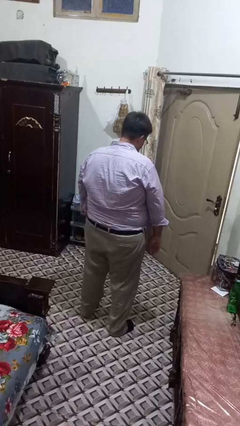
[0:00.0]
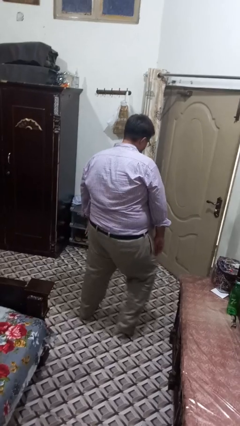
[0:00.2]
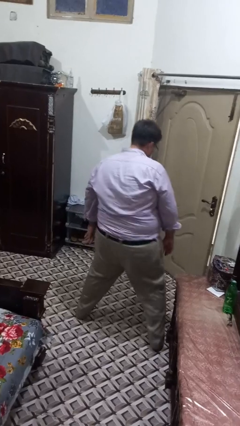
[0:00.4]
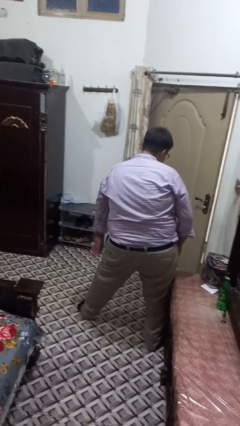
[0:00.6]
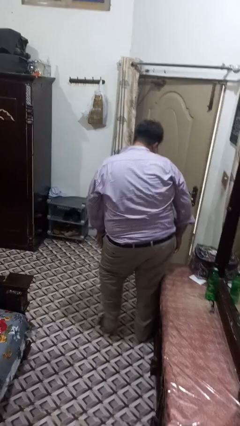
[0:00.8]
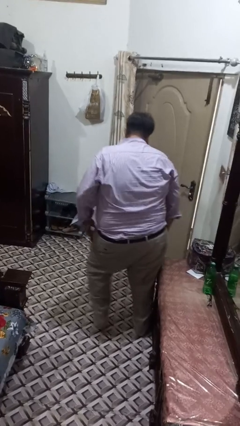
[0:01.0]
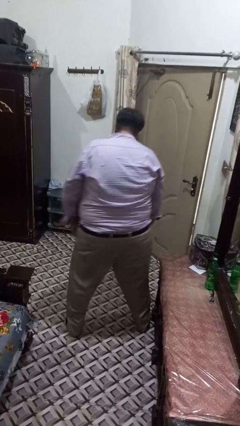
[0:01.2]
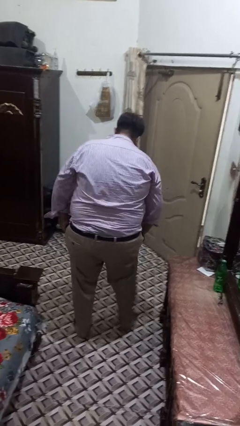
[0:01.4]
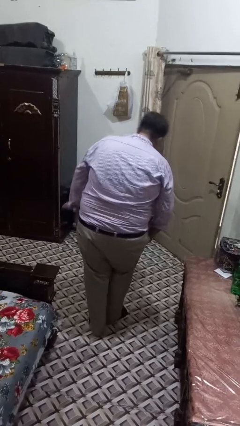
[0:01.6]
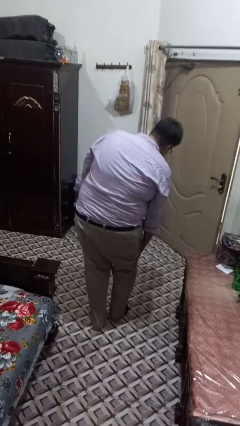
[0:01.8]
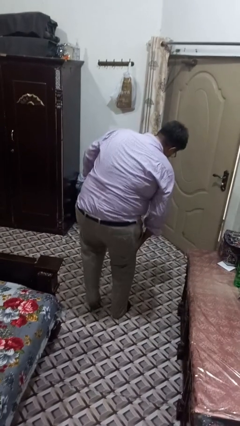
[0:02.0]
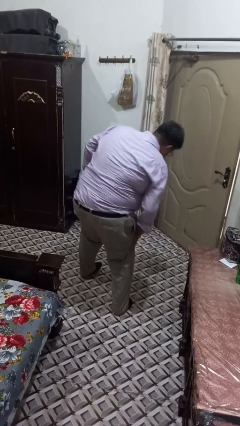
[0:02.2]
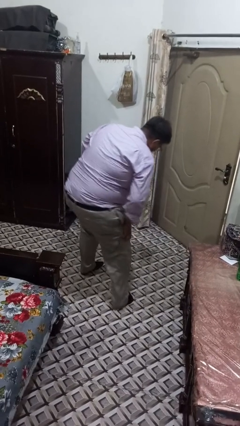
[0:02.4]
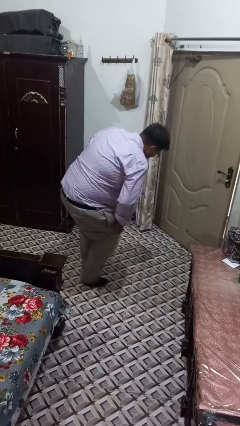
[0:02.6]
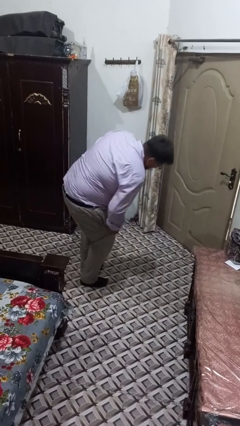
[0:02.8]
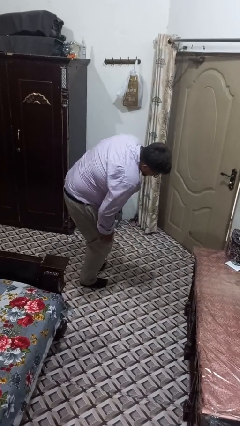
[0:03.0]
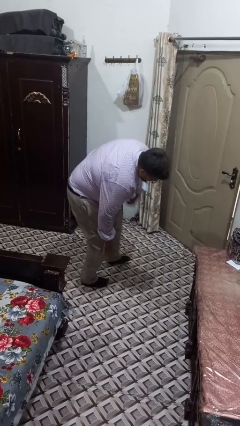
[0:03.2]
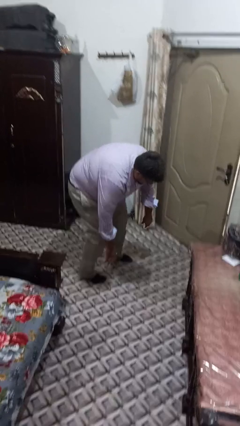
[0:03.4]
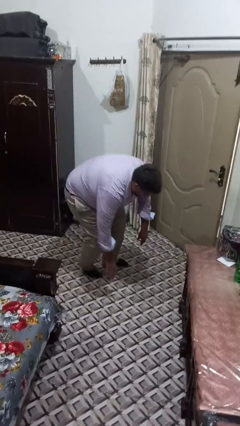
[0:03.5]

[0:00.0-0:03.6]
person trips on object on floor

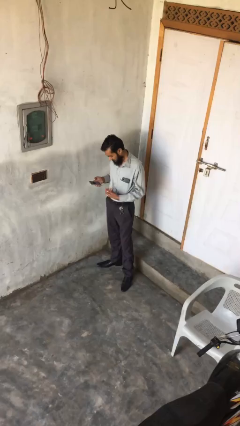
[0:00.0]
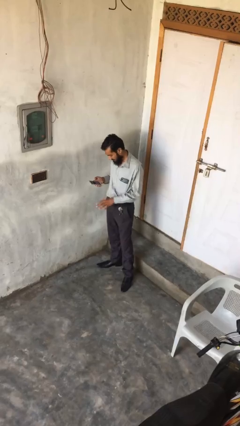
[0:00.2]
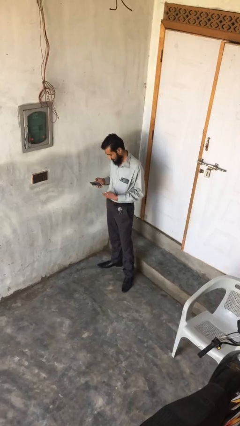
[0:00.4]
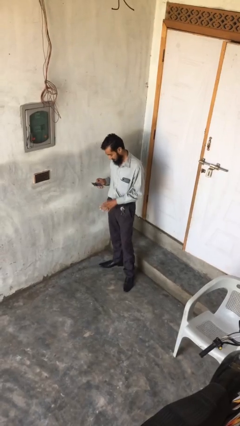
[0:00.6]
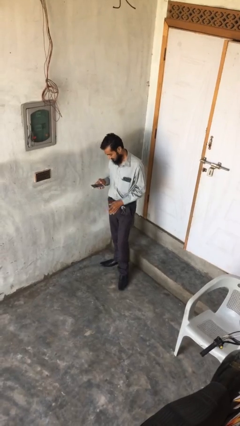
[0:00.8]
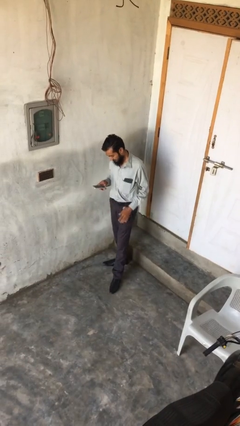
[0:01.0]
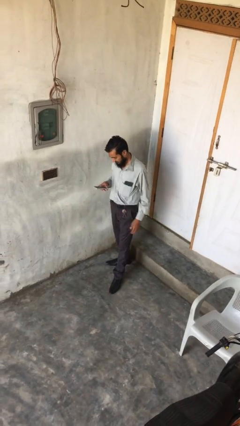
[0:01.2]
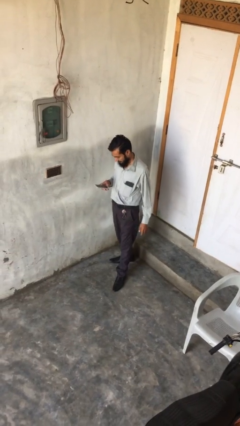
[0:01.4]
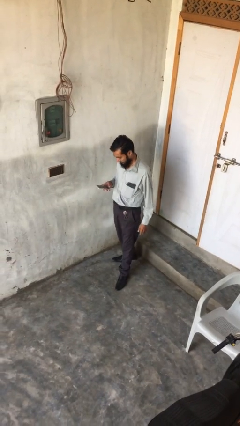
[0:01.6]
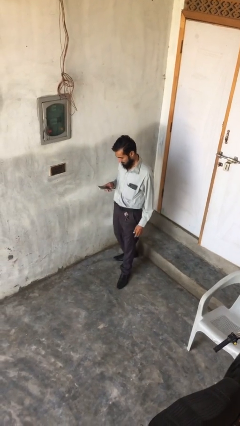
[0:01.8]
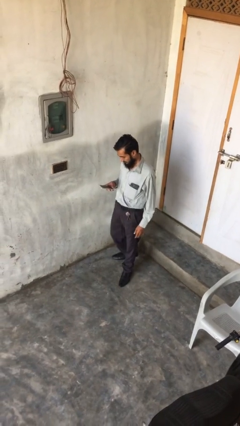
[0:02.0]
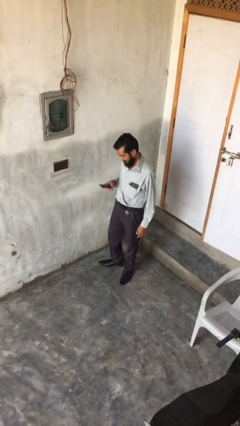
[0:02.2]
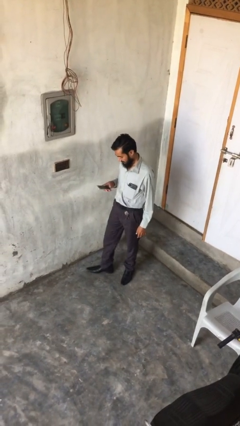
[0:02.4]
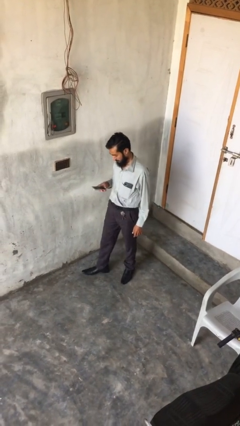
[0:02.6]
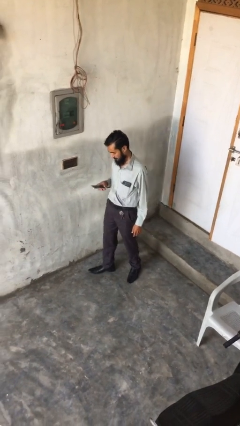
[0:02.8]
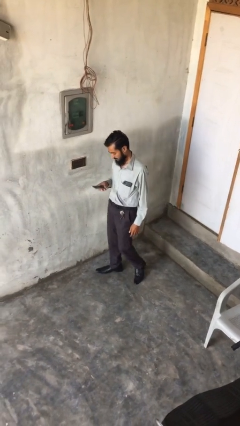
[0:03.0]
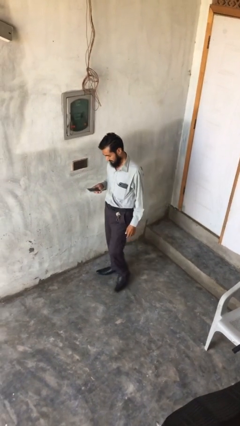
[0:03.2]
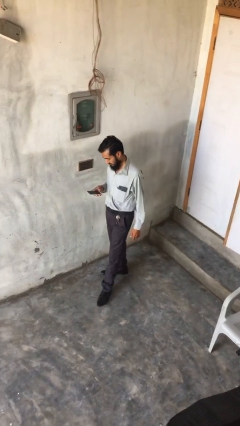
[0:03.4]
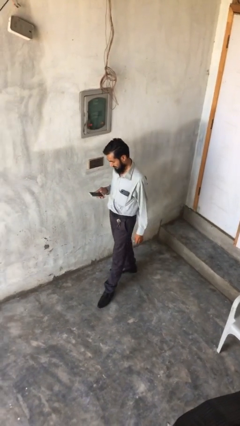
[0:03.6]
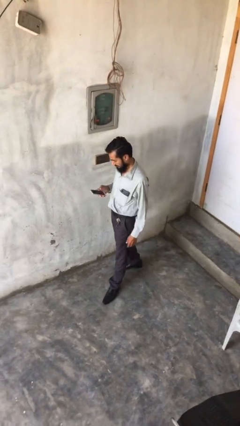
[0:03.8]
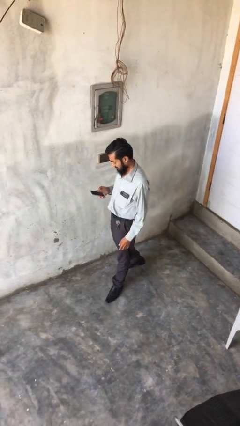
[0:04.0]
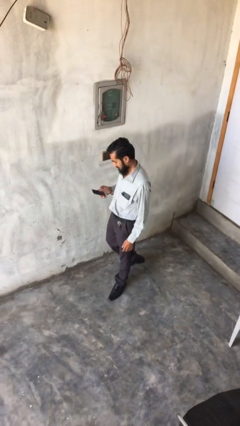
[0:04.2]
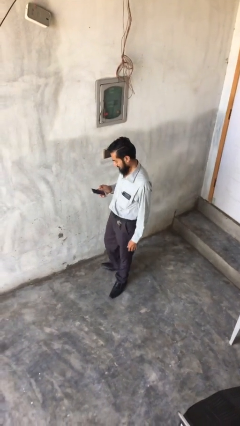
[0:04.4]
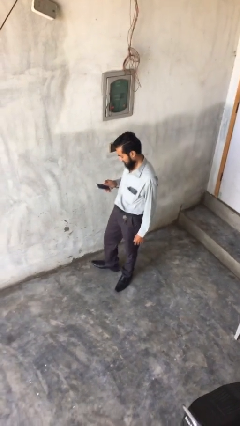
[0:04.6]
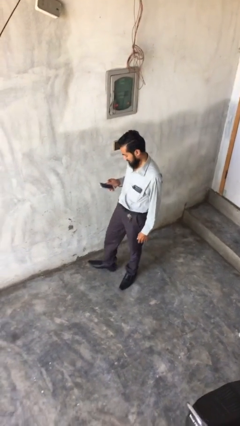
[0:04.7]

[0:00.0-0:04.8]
person texts on phone

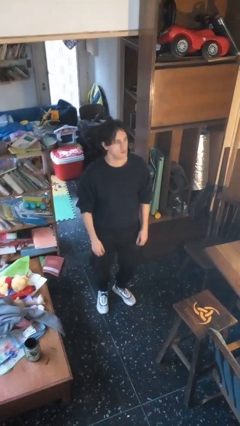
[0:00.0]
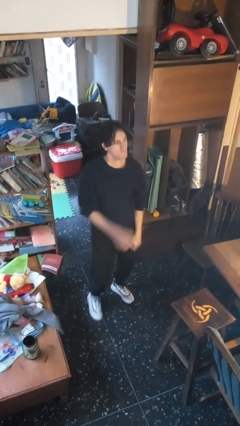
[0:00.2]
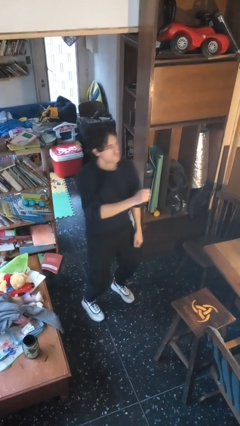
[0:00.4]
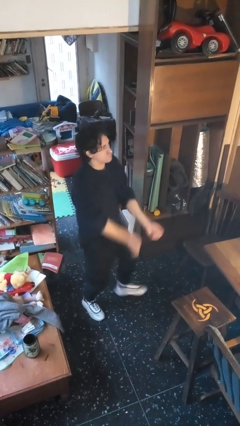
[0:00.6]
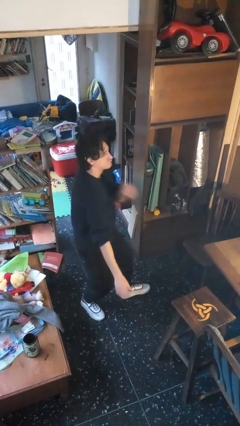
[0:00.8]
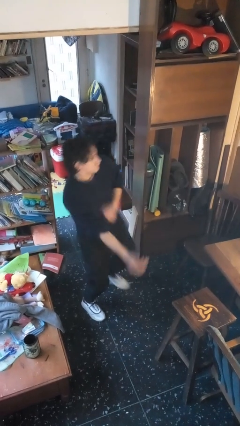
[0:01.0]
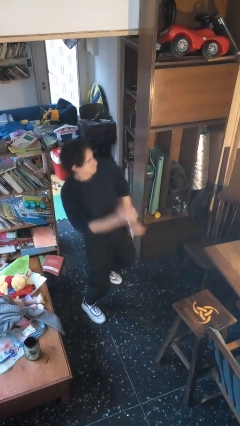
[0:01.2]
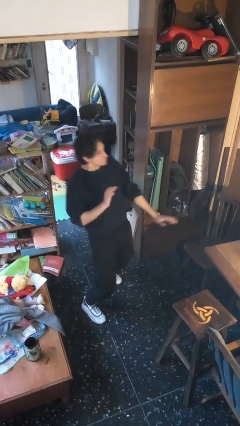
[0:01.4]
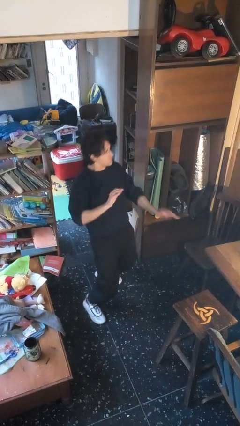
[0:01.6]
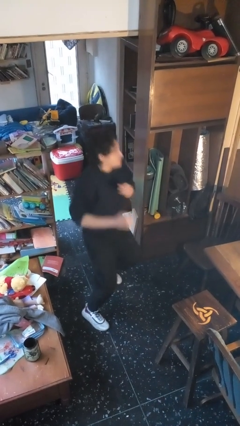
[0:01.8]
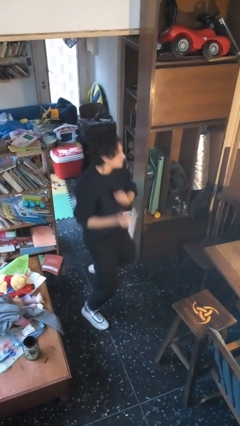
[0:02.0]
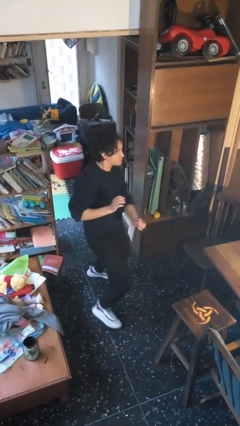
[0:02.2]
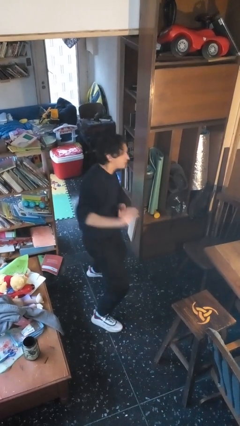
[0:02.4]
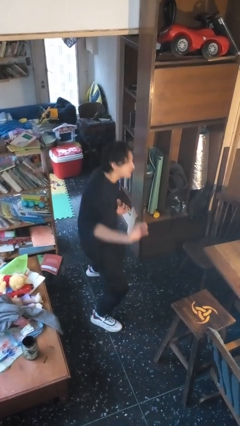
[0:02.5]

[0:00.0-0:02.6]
person dances in place

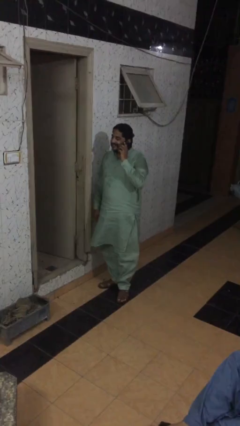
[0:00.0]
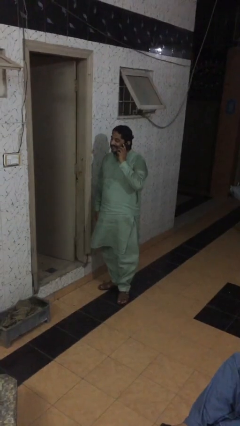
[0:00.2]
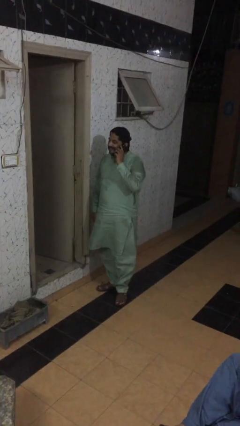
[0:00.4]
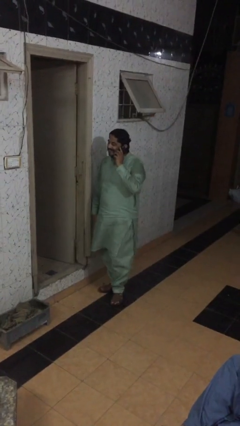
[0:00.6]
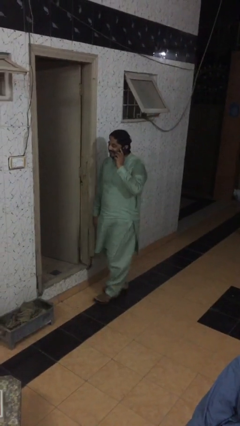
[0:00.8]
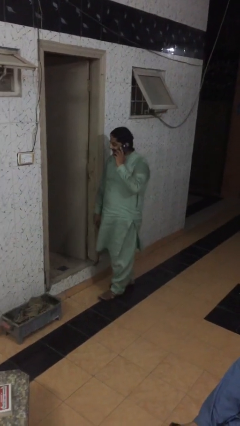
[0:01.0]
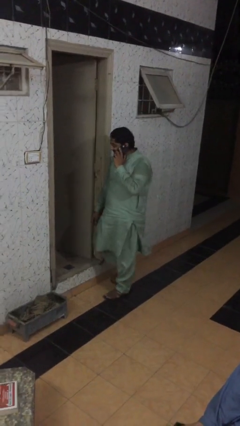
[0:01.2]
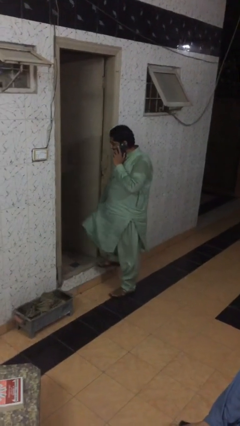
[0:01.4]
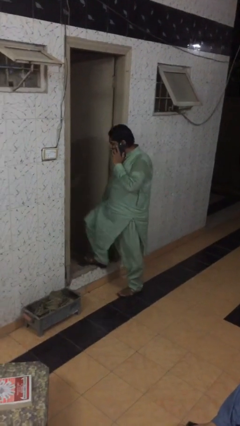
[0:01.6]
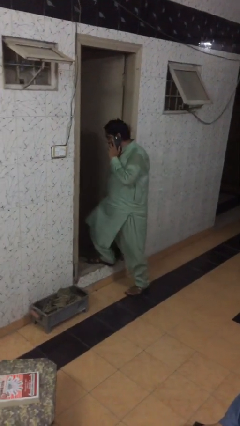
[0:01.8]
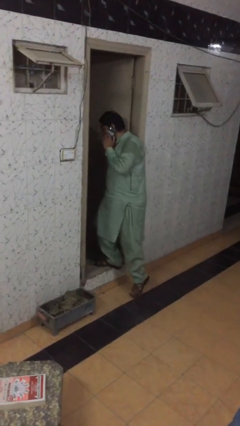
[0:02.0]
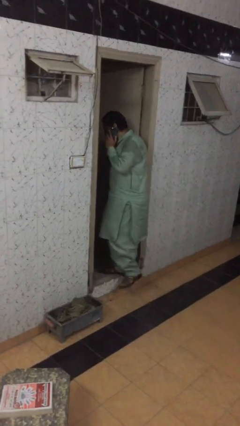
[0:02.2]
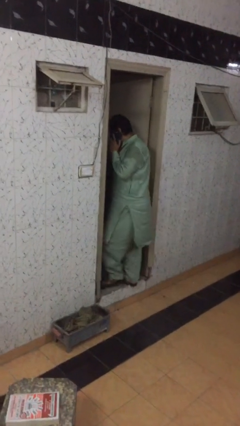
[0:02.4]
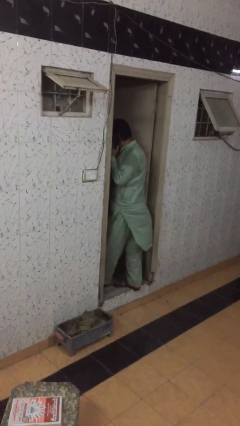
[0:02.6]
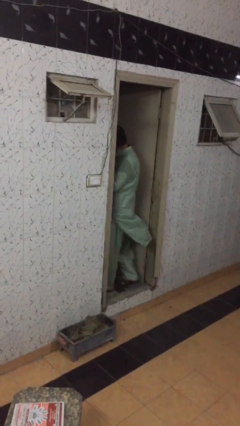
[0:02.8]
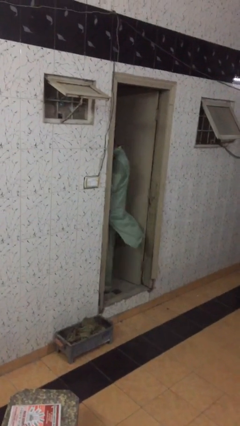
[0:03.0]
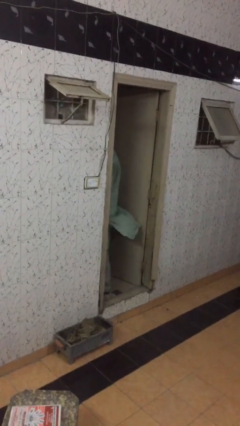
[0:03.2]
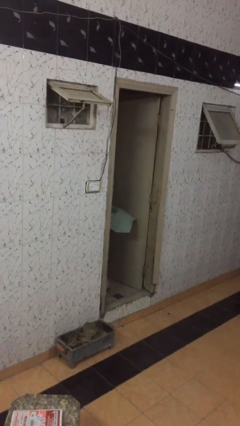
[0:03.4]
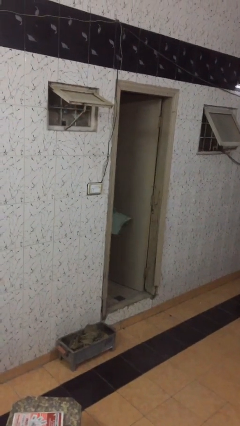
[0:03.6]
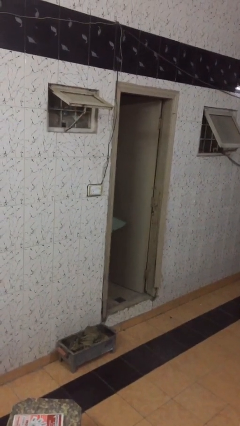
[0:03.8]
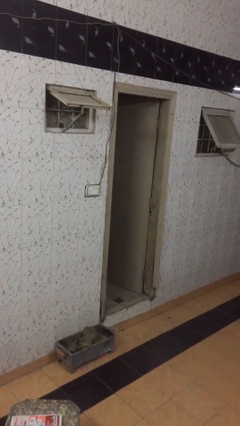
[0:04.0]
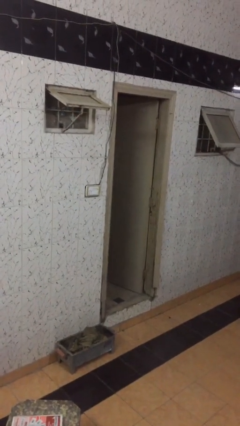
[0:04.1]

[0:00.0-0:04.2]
person exits scene through structure

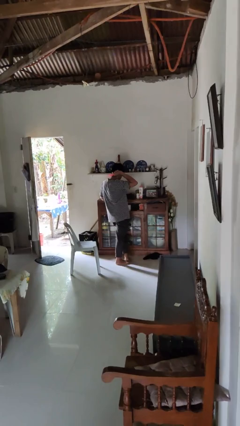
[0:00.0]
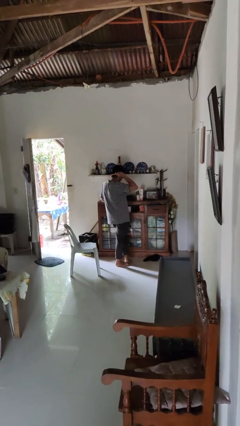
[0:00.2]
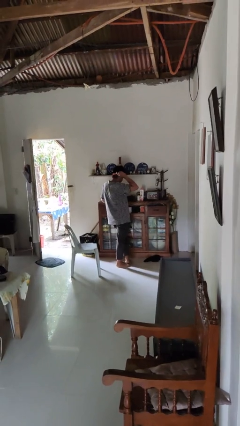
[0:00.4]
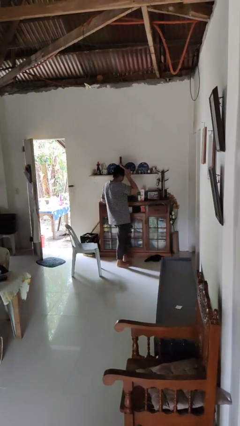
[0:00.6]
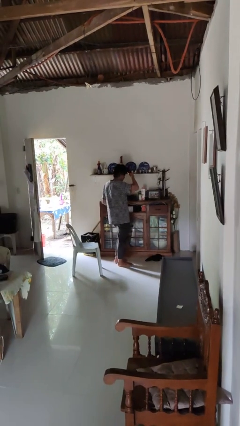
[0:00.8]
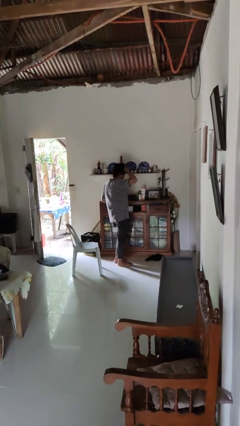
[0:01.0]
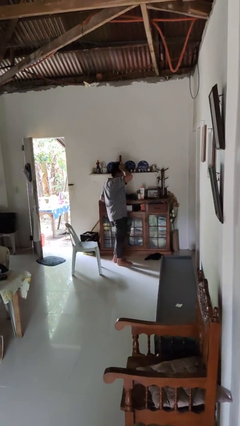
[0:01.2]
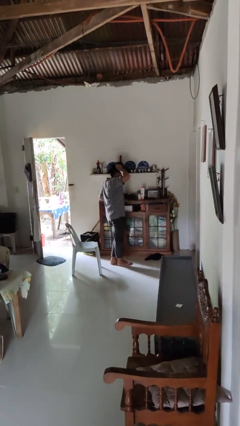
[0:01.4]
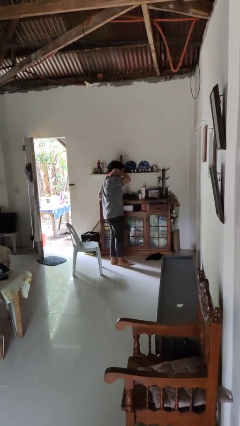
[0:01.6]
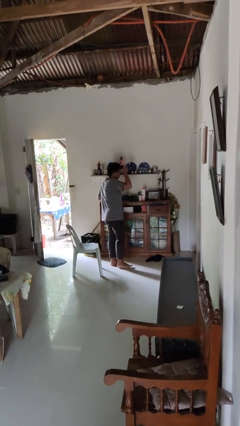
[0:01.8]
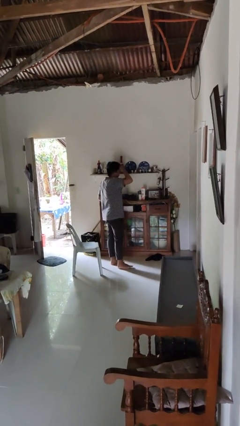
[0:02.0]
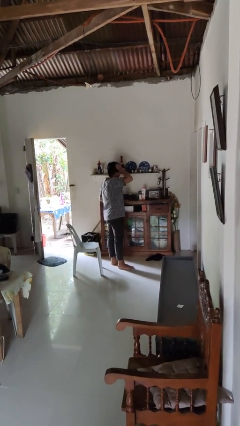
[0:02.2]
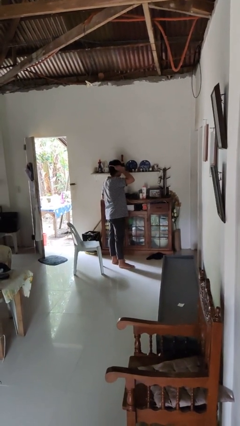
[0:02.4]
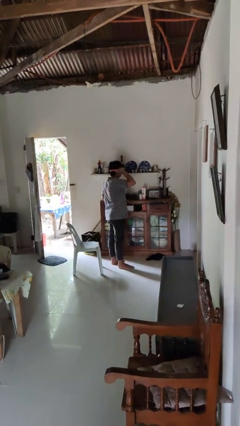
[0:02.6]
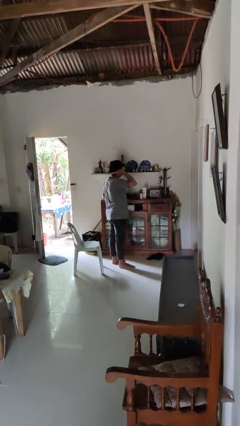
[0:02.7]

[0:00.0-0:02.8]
person brushes hair
